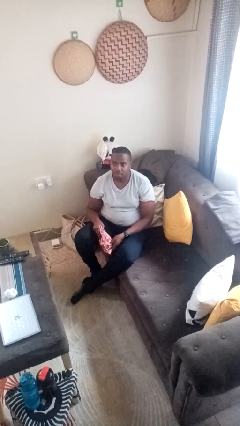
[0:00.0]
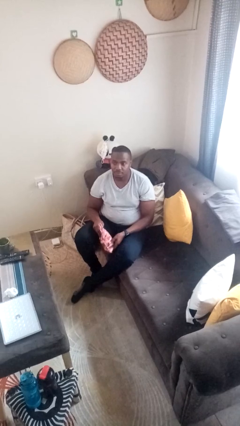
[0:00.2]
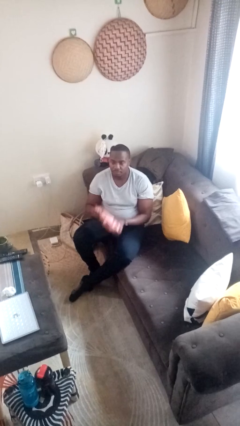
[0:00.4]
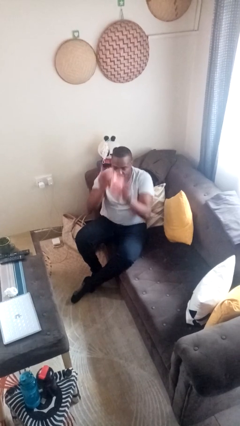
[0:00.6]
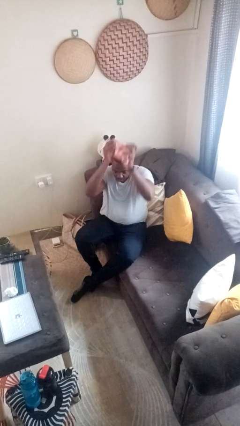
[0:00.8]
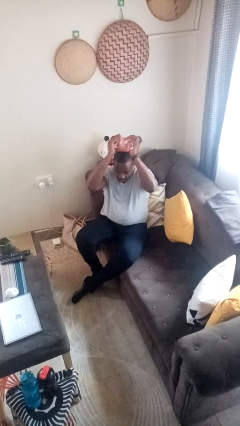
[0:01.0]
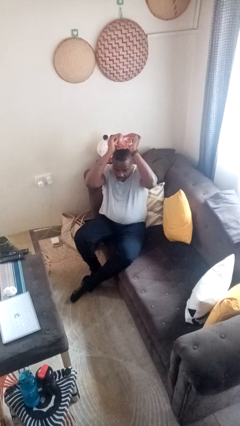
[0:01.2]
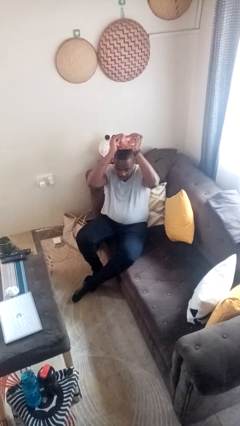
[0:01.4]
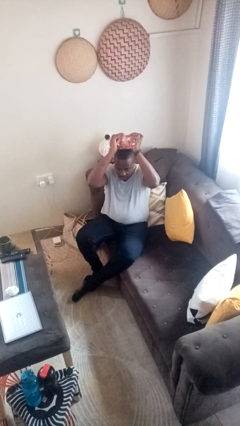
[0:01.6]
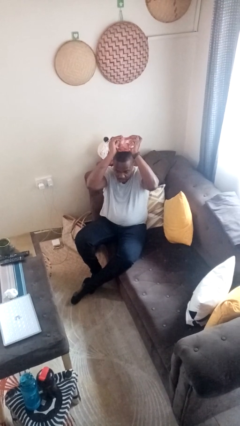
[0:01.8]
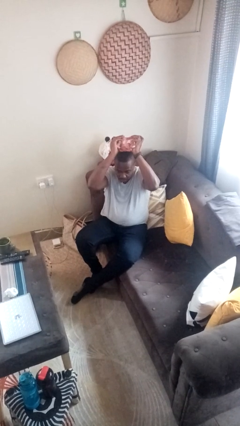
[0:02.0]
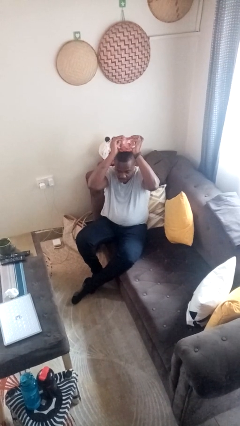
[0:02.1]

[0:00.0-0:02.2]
person holds object above head

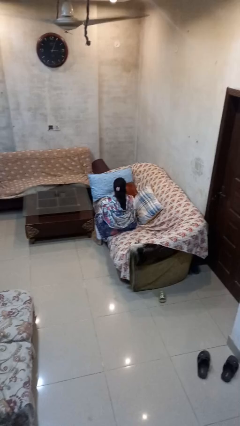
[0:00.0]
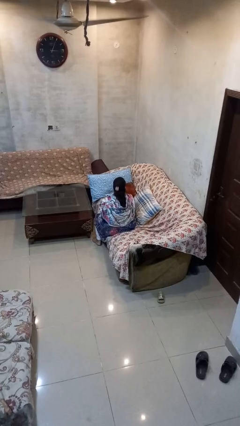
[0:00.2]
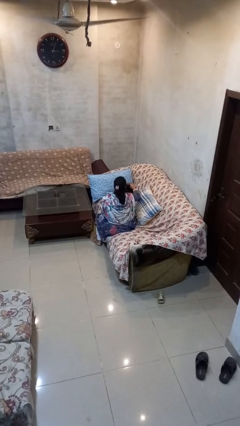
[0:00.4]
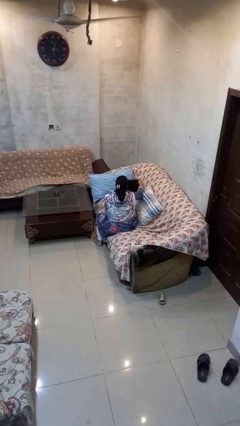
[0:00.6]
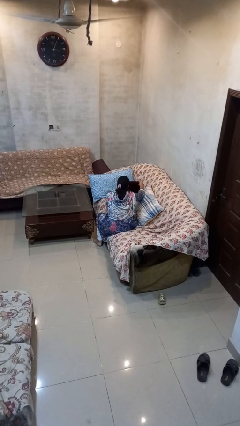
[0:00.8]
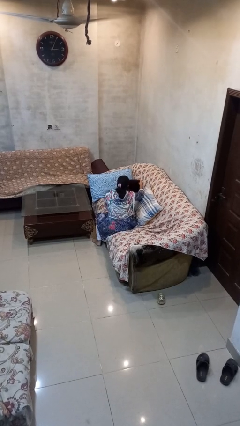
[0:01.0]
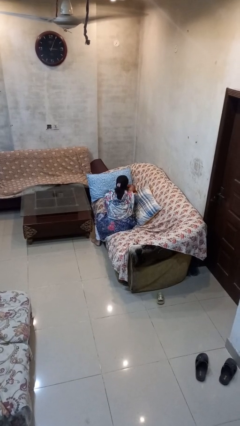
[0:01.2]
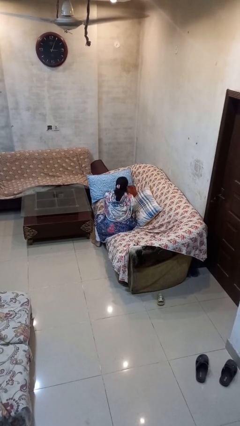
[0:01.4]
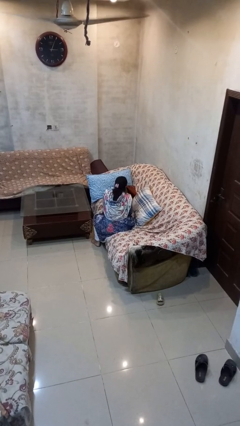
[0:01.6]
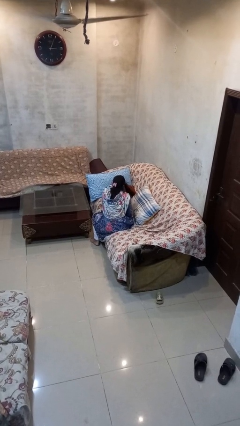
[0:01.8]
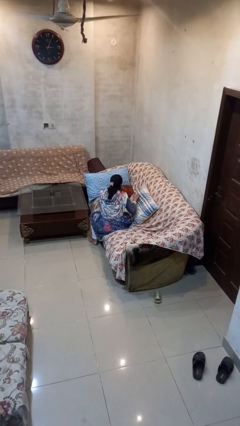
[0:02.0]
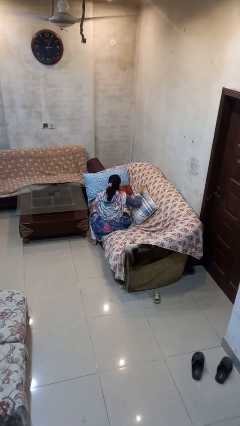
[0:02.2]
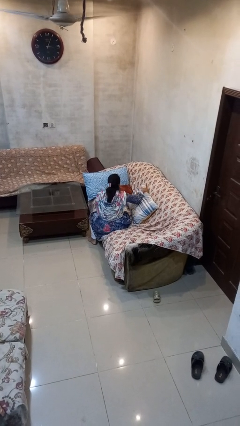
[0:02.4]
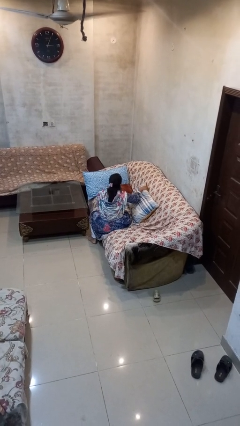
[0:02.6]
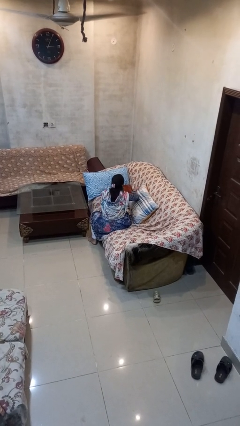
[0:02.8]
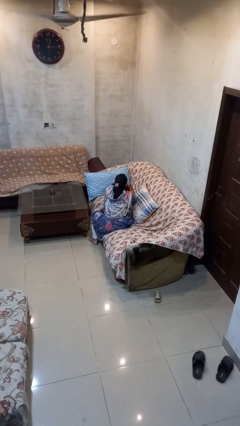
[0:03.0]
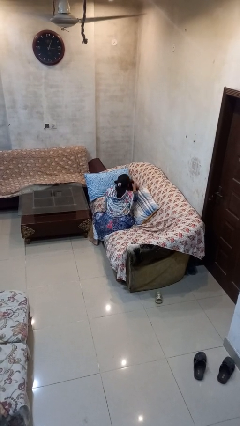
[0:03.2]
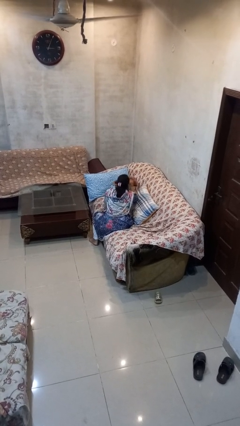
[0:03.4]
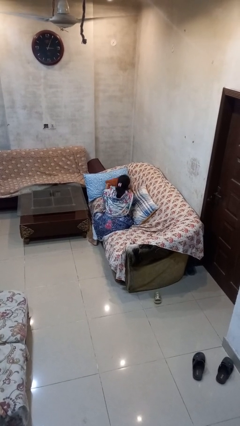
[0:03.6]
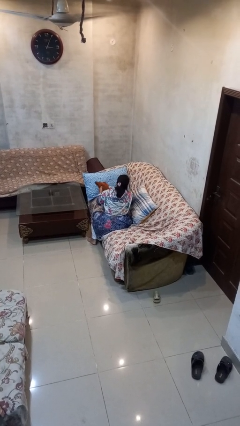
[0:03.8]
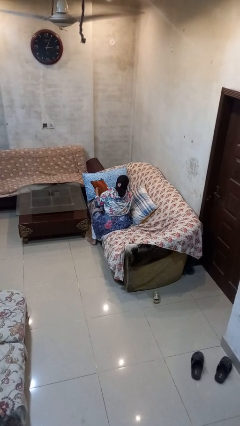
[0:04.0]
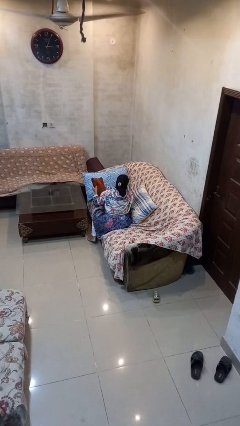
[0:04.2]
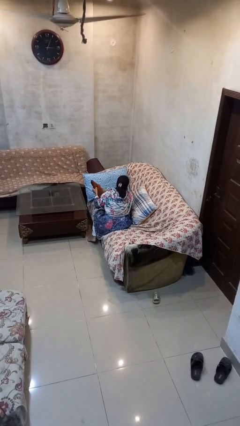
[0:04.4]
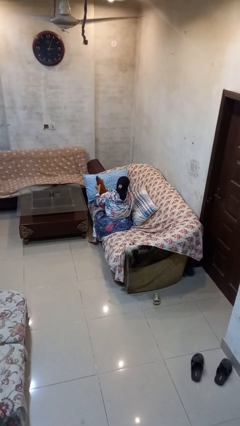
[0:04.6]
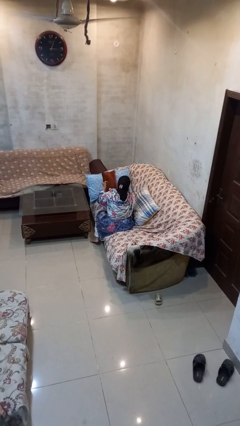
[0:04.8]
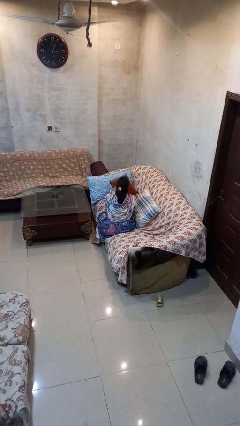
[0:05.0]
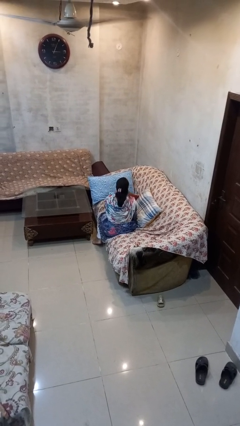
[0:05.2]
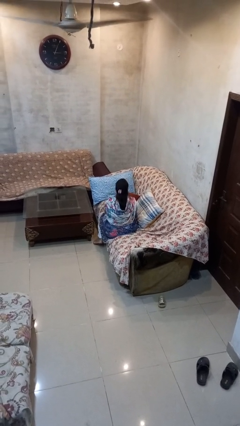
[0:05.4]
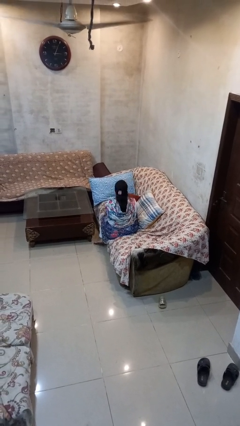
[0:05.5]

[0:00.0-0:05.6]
person searches in couch

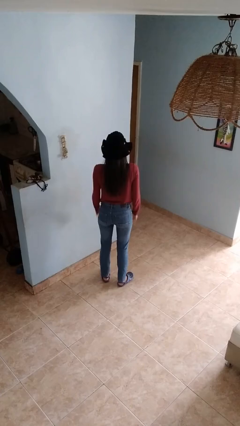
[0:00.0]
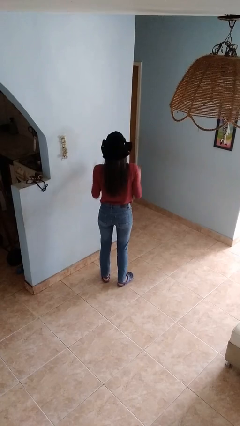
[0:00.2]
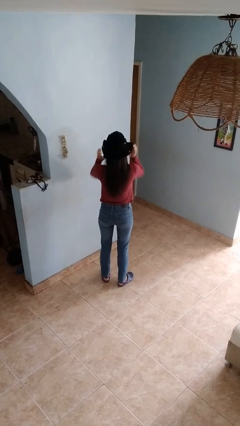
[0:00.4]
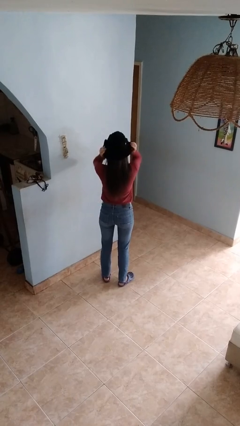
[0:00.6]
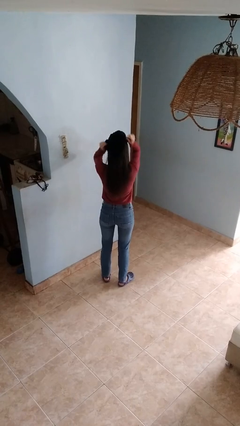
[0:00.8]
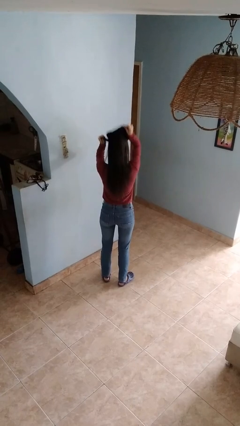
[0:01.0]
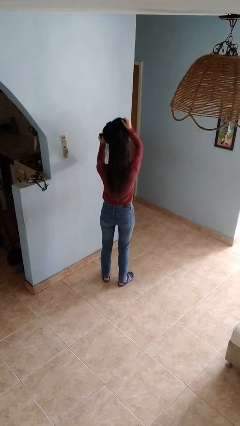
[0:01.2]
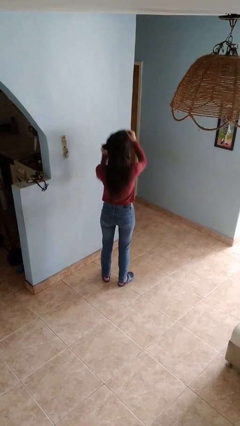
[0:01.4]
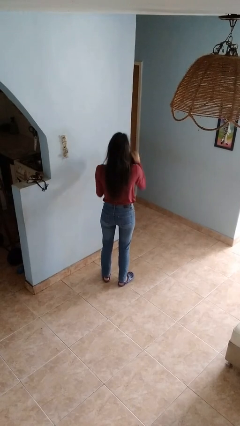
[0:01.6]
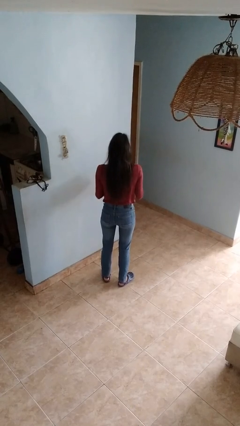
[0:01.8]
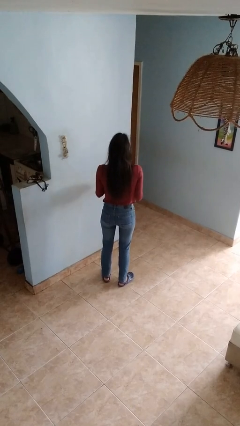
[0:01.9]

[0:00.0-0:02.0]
person takes off hat

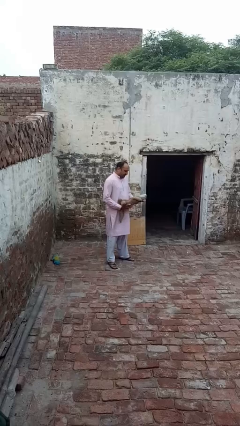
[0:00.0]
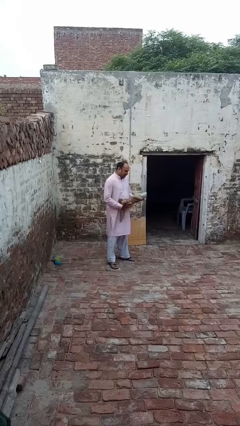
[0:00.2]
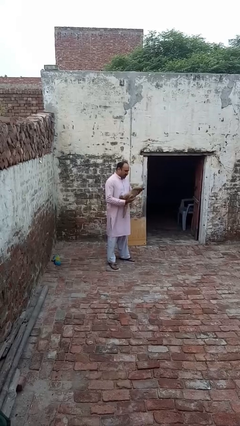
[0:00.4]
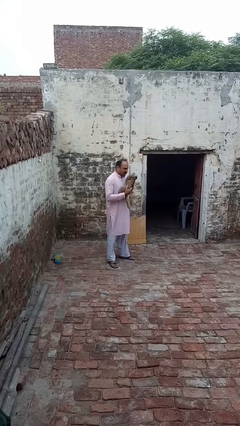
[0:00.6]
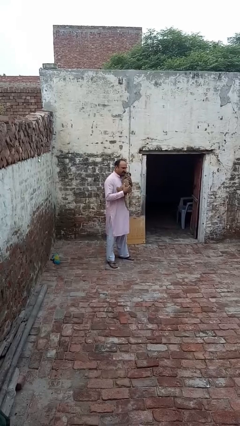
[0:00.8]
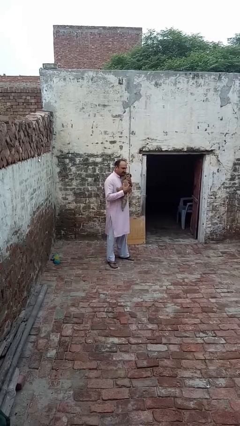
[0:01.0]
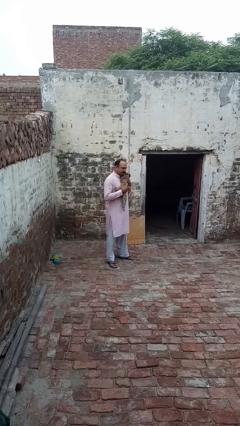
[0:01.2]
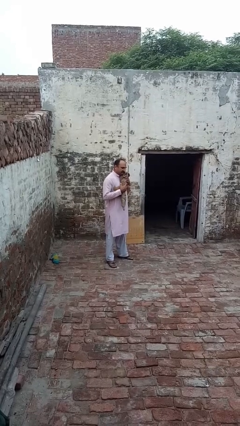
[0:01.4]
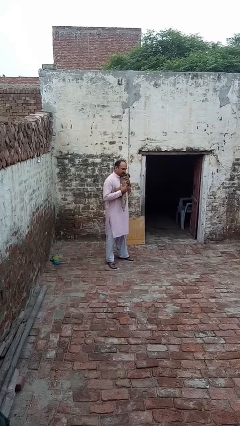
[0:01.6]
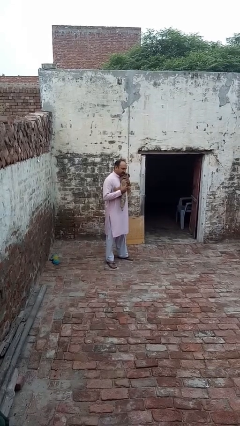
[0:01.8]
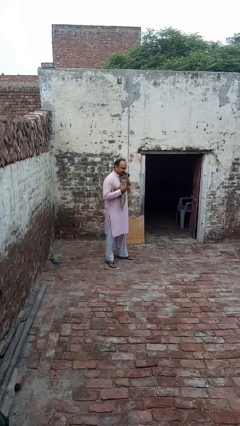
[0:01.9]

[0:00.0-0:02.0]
person hugs stuffed animal

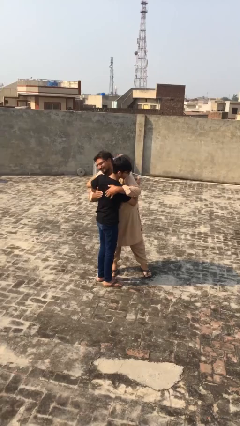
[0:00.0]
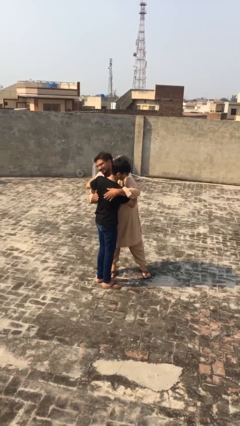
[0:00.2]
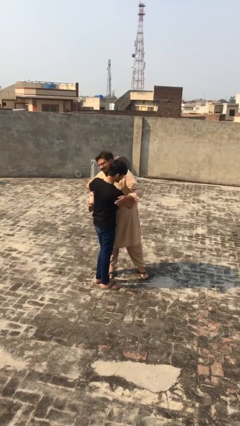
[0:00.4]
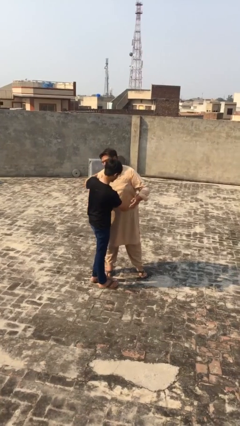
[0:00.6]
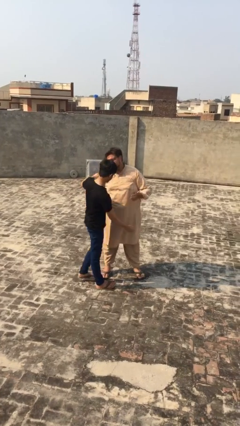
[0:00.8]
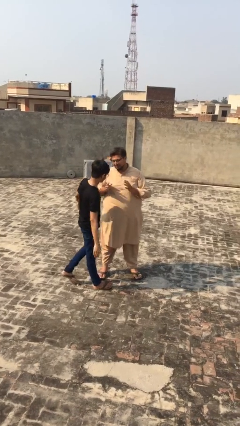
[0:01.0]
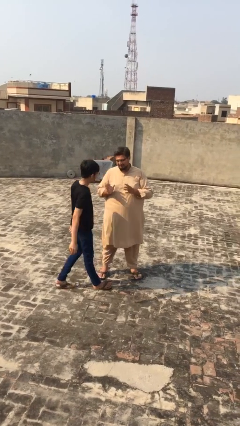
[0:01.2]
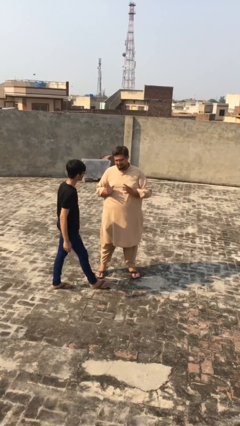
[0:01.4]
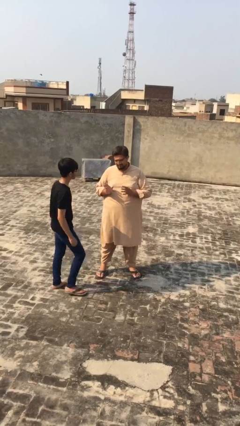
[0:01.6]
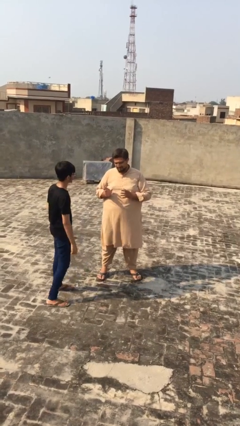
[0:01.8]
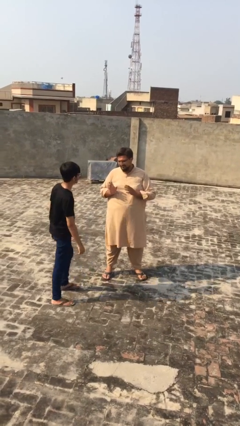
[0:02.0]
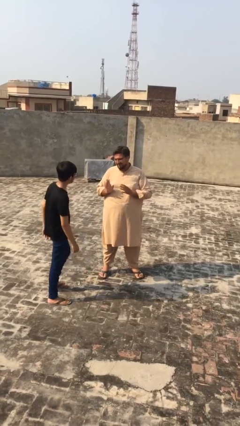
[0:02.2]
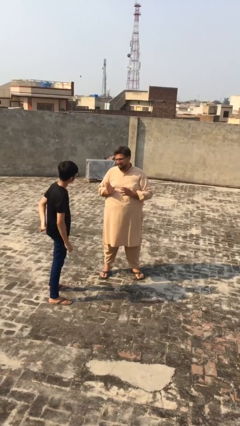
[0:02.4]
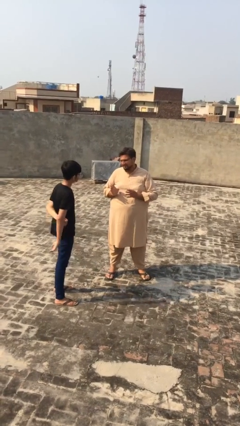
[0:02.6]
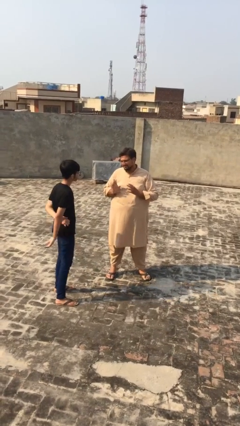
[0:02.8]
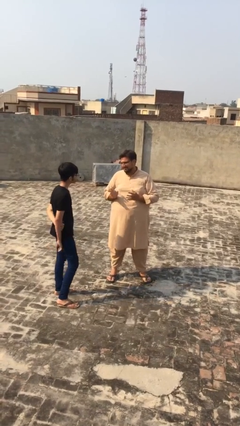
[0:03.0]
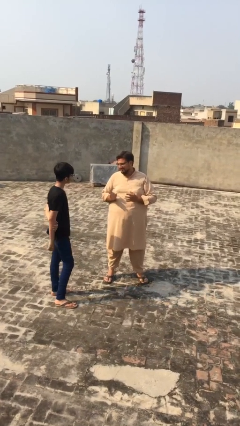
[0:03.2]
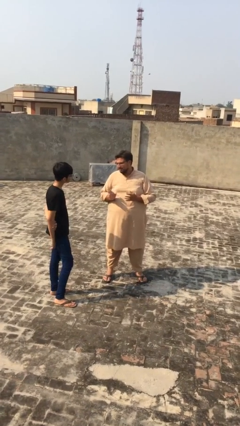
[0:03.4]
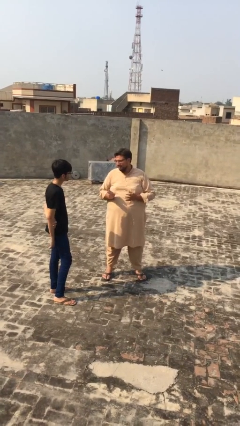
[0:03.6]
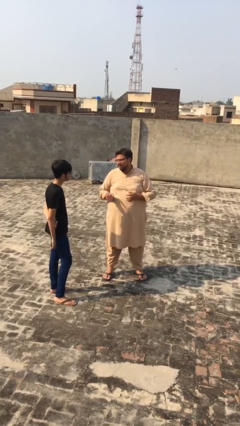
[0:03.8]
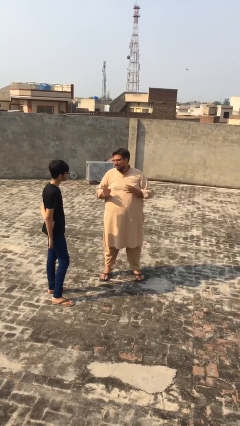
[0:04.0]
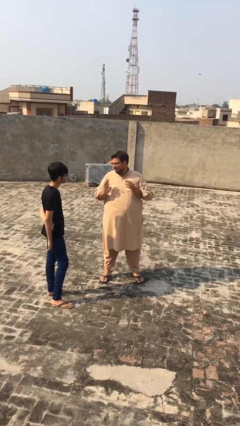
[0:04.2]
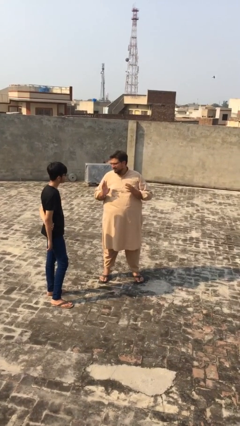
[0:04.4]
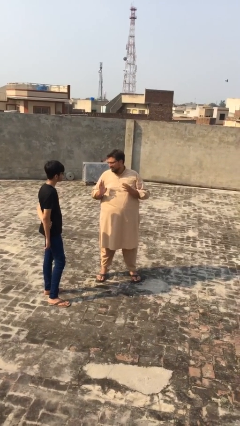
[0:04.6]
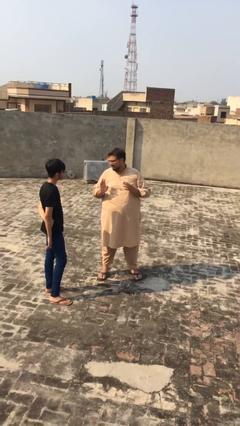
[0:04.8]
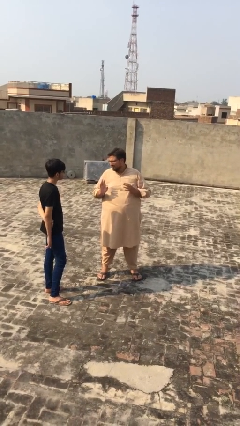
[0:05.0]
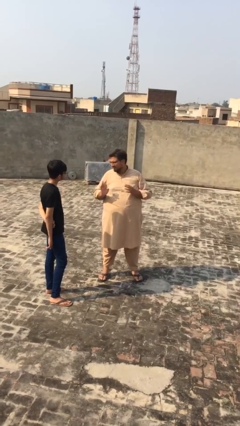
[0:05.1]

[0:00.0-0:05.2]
person talks to person

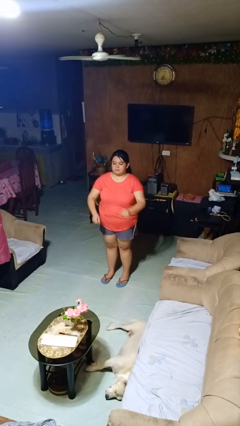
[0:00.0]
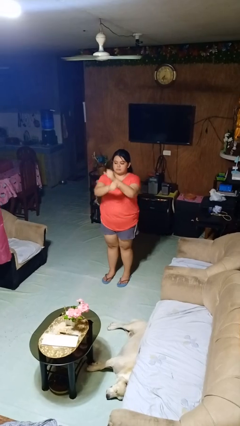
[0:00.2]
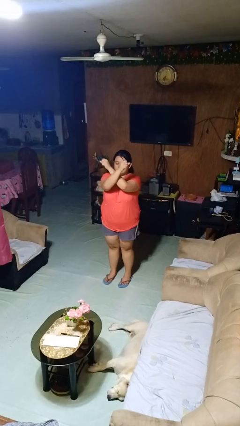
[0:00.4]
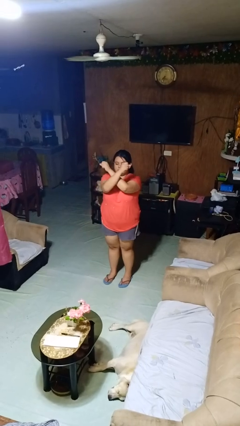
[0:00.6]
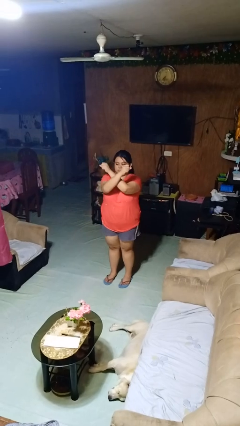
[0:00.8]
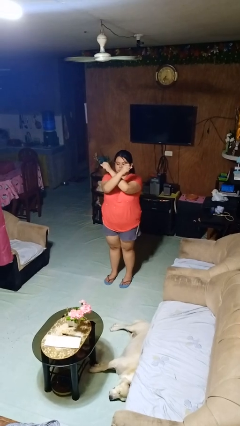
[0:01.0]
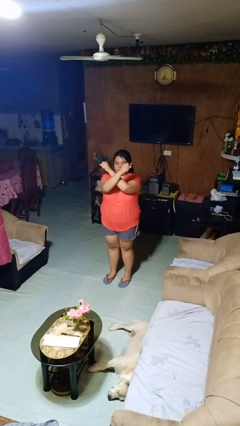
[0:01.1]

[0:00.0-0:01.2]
person gestures arms x
